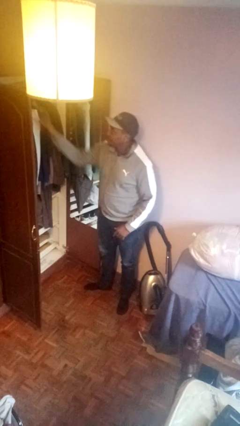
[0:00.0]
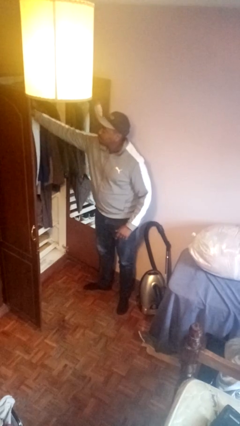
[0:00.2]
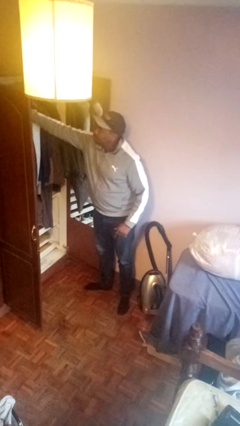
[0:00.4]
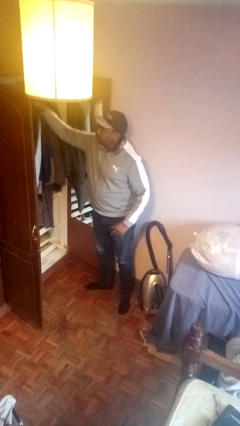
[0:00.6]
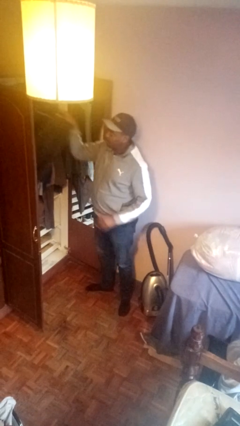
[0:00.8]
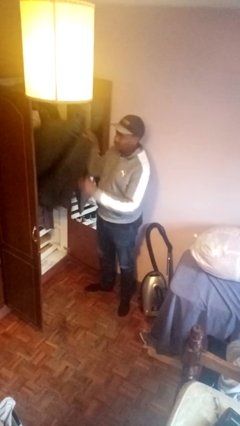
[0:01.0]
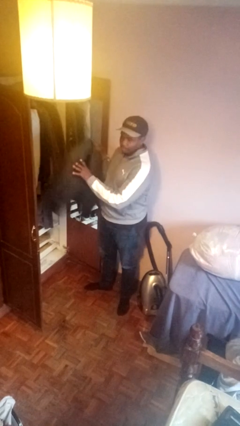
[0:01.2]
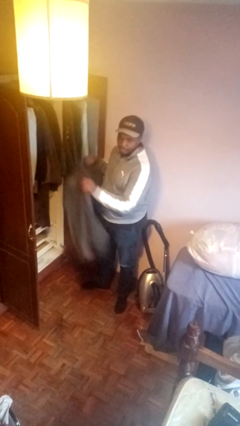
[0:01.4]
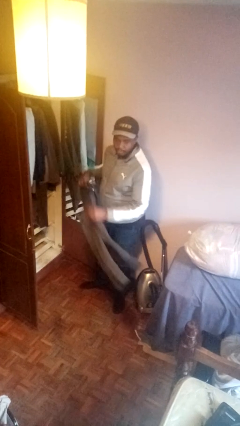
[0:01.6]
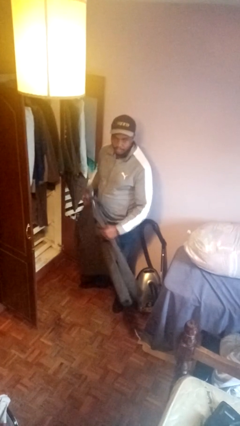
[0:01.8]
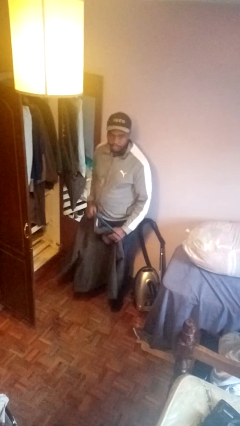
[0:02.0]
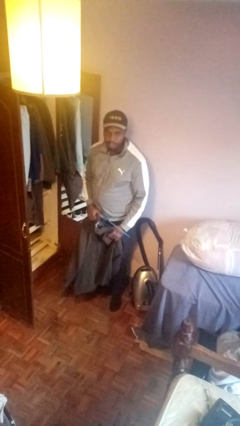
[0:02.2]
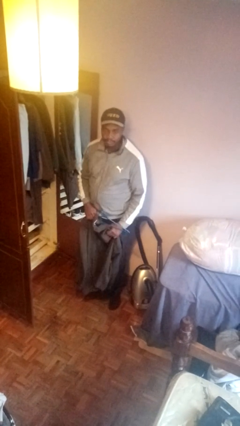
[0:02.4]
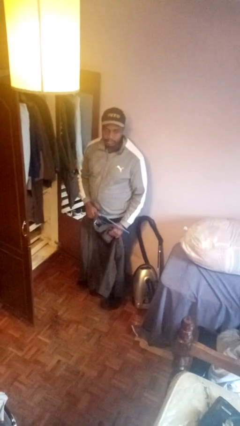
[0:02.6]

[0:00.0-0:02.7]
person takes clothes from closet

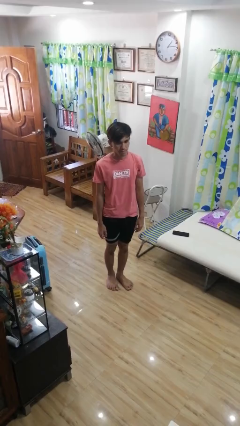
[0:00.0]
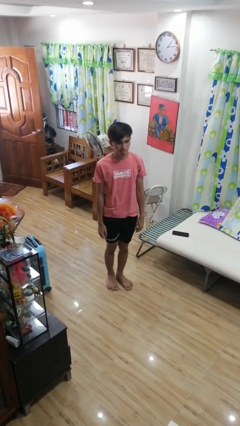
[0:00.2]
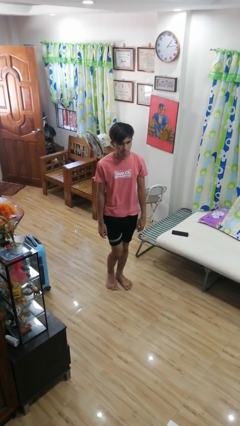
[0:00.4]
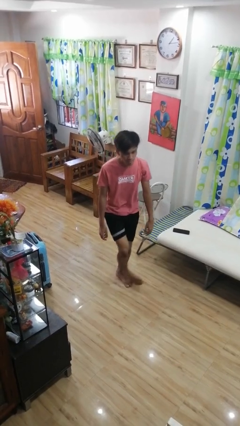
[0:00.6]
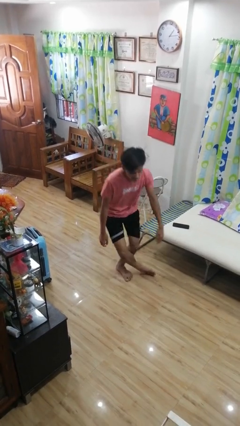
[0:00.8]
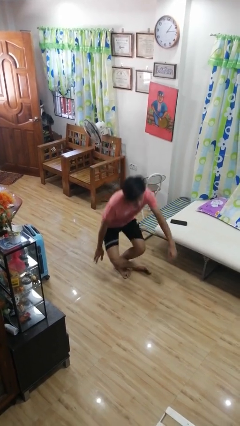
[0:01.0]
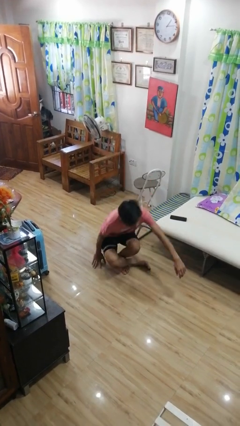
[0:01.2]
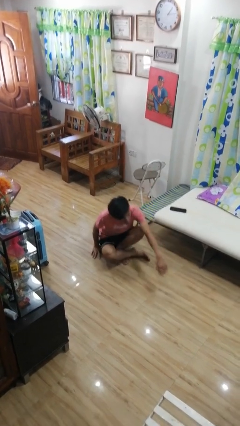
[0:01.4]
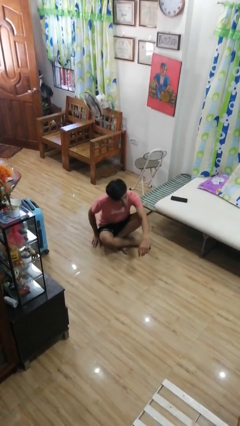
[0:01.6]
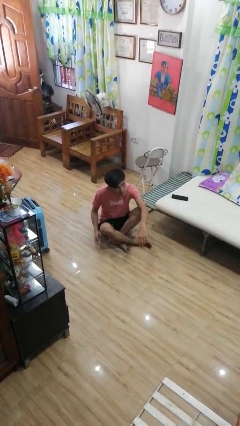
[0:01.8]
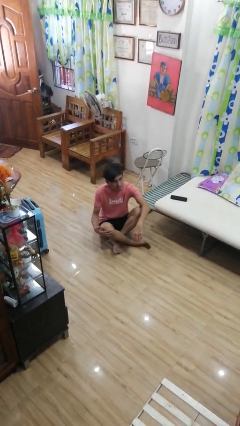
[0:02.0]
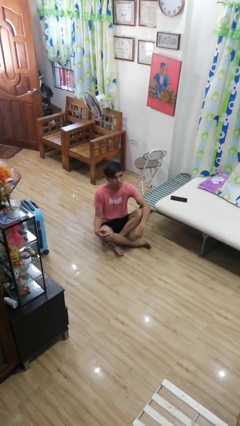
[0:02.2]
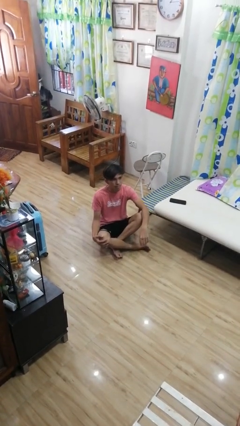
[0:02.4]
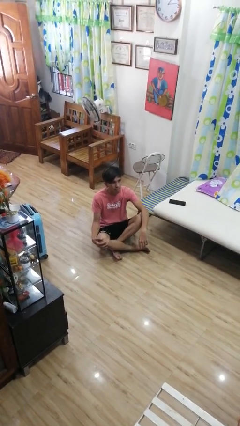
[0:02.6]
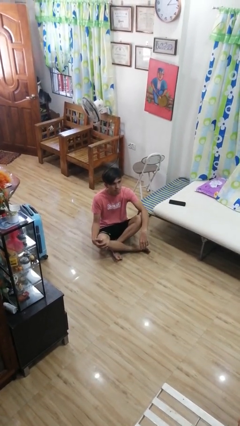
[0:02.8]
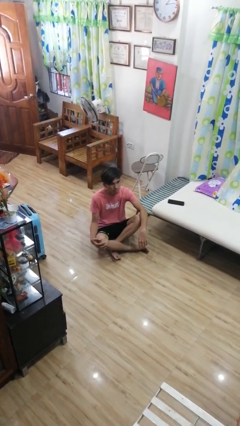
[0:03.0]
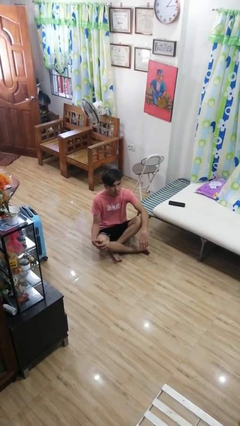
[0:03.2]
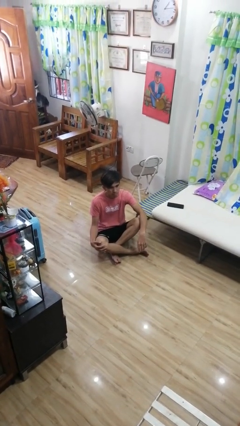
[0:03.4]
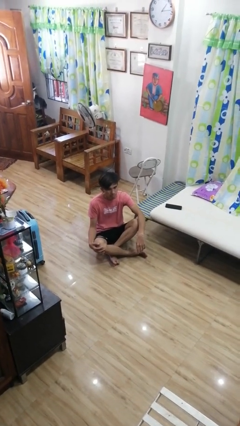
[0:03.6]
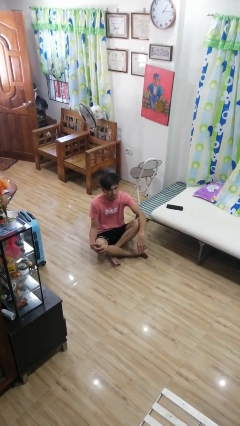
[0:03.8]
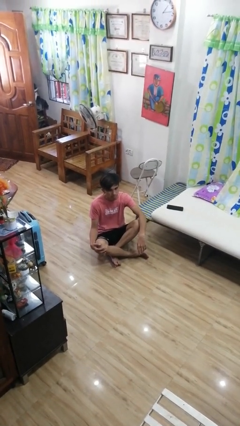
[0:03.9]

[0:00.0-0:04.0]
person sits crisscross

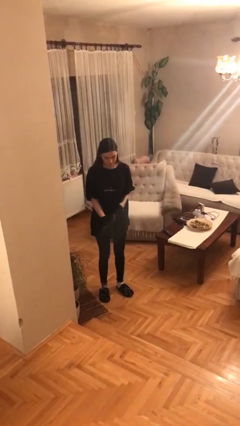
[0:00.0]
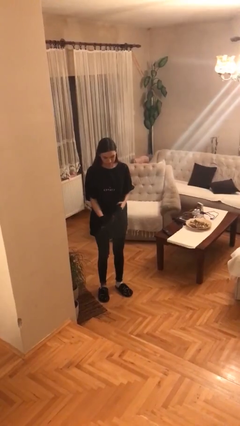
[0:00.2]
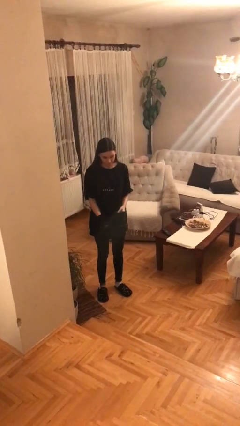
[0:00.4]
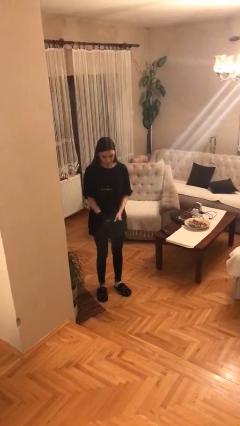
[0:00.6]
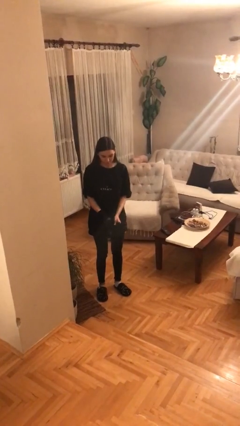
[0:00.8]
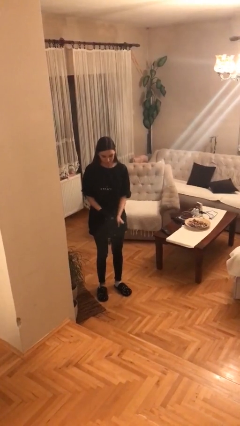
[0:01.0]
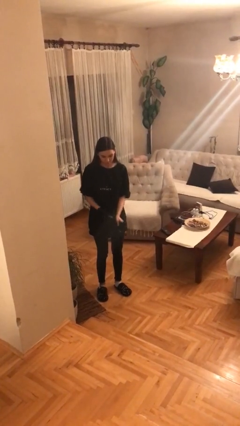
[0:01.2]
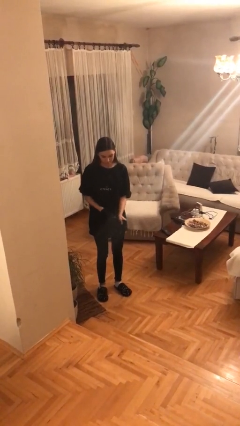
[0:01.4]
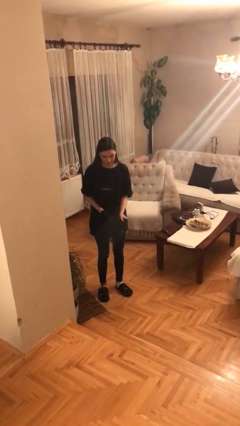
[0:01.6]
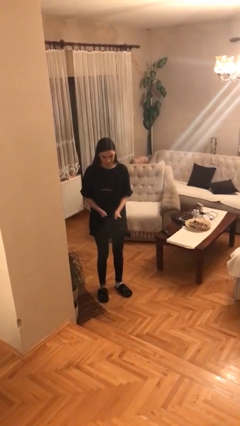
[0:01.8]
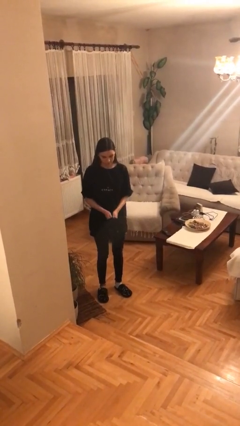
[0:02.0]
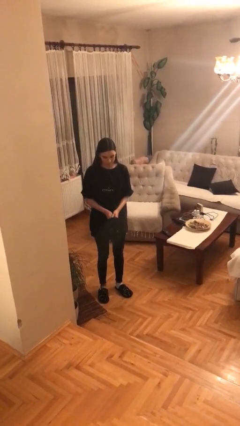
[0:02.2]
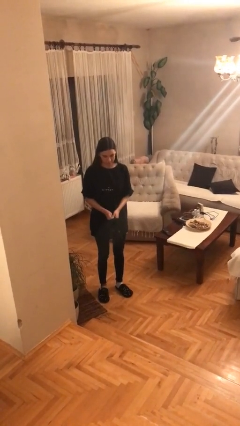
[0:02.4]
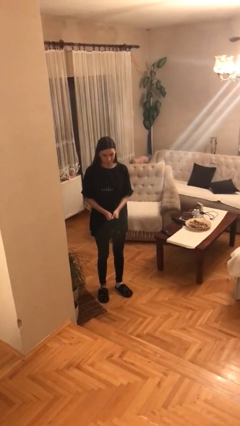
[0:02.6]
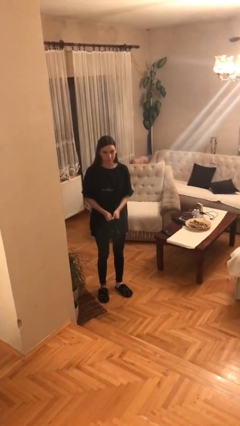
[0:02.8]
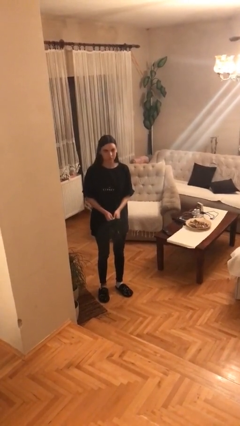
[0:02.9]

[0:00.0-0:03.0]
person takes off gloves

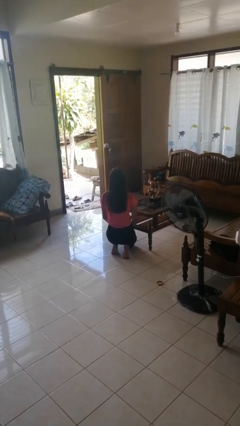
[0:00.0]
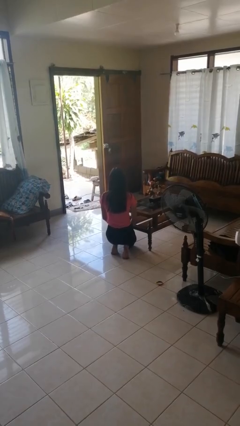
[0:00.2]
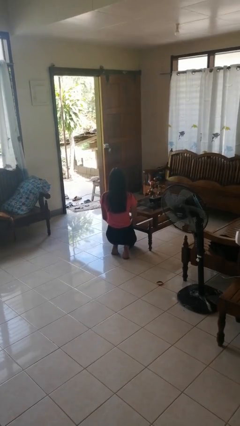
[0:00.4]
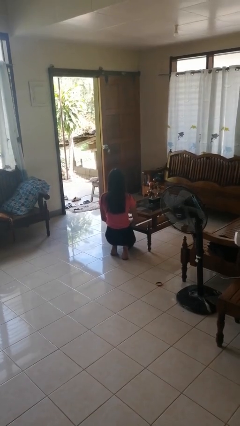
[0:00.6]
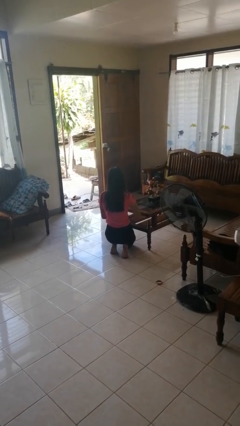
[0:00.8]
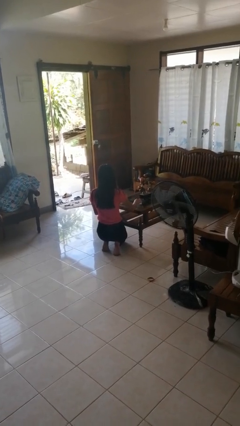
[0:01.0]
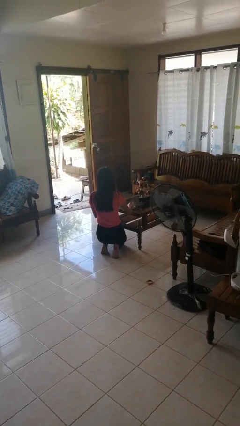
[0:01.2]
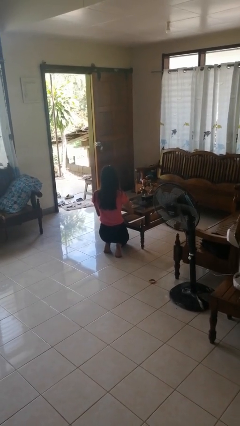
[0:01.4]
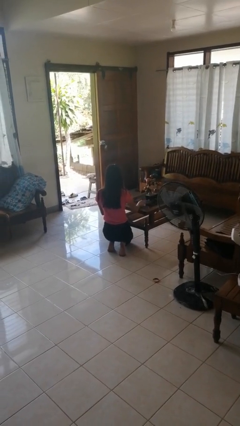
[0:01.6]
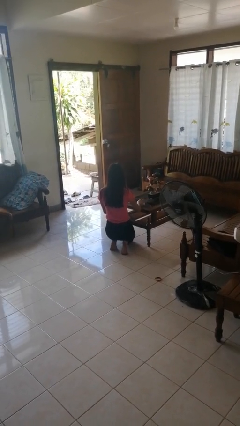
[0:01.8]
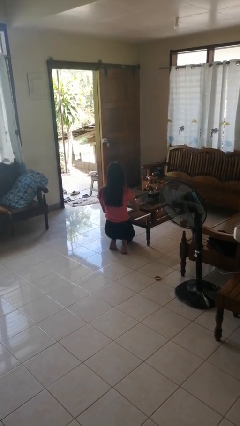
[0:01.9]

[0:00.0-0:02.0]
person cleans table with rag

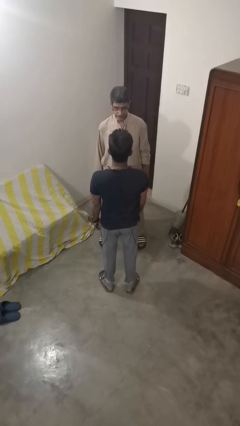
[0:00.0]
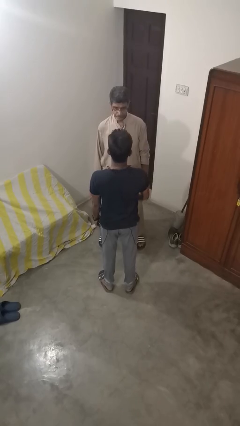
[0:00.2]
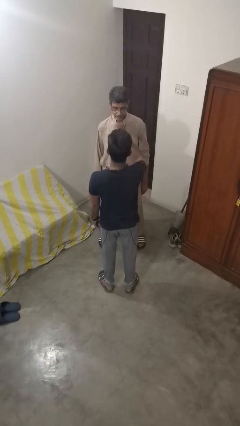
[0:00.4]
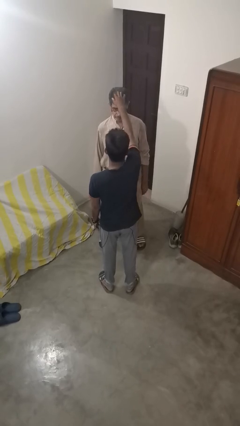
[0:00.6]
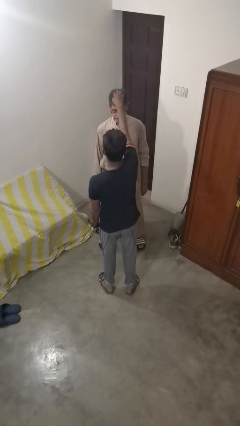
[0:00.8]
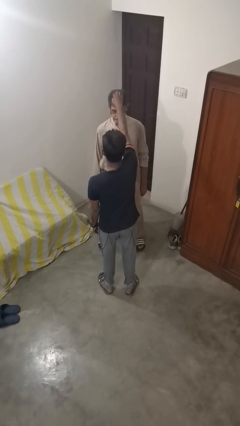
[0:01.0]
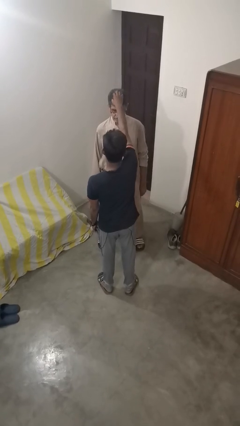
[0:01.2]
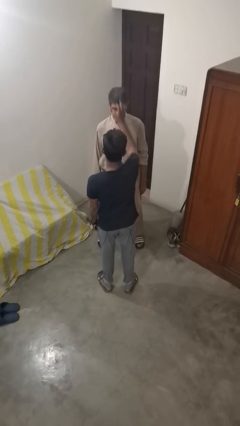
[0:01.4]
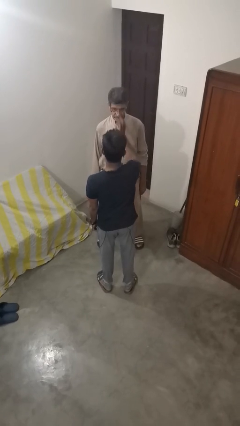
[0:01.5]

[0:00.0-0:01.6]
person grabs person by hair

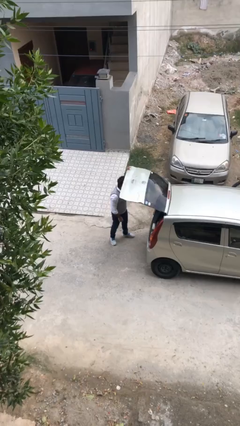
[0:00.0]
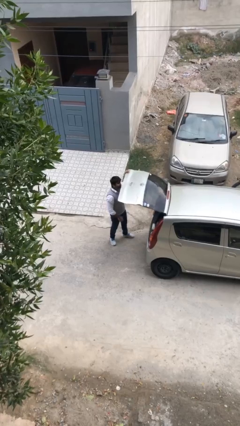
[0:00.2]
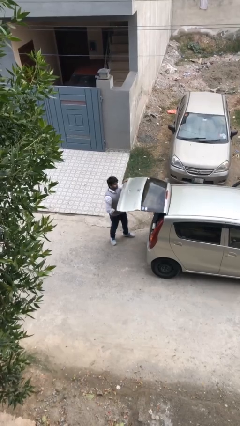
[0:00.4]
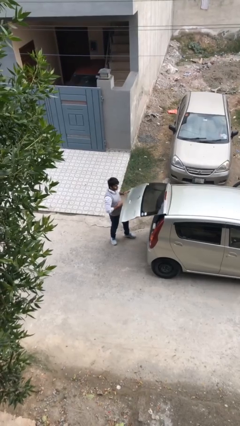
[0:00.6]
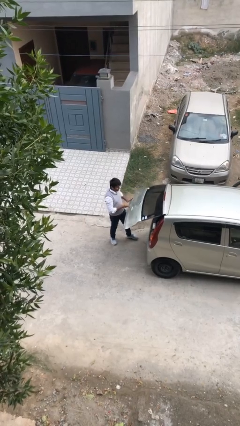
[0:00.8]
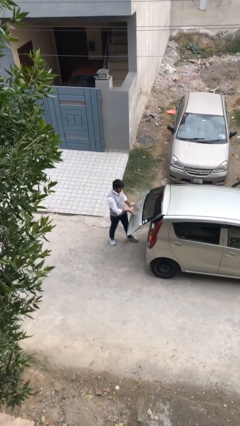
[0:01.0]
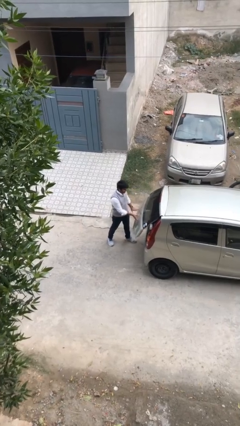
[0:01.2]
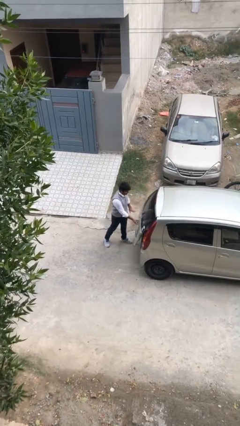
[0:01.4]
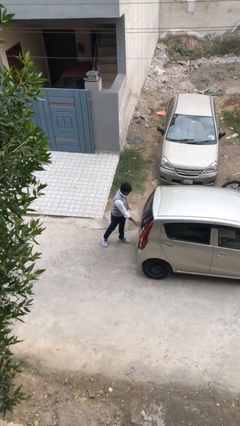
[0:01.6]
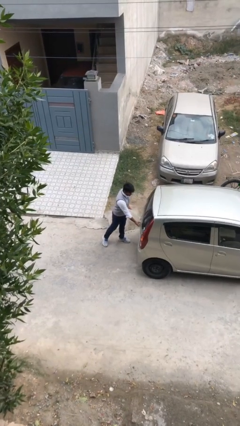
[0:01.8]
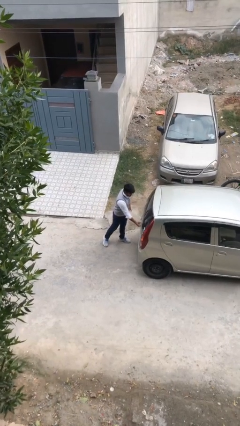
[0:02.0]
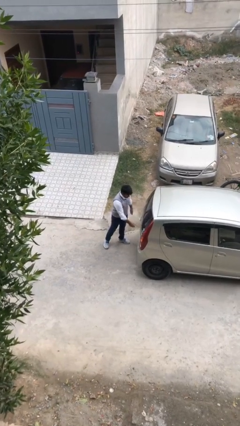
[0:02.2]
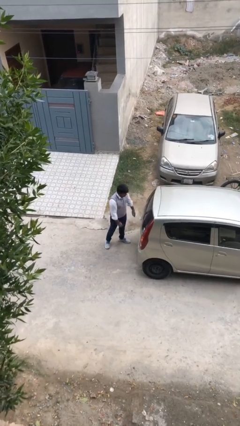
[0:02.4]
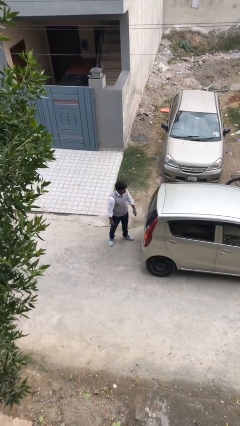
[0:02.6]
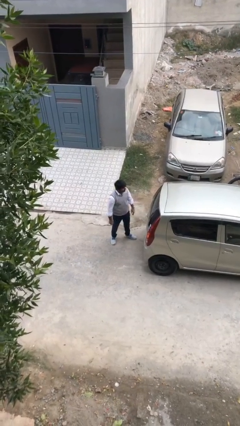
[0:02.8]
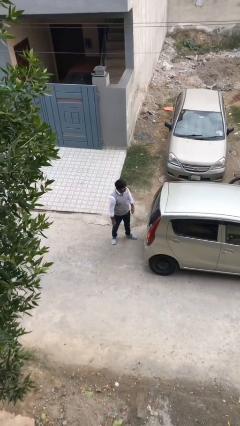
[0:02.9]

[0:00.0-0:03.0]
person closes car trunk

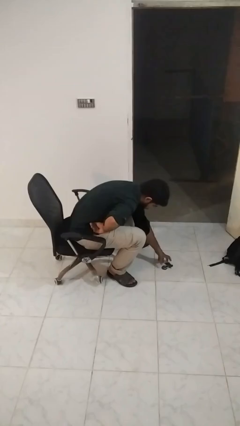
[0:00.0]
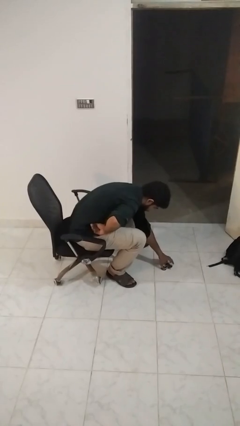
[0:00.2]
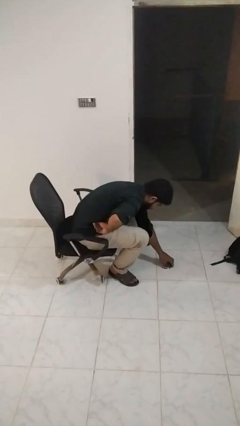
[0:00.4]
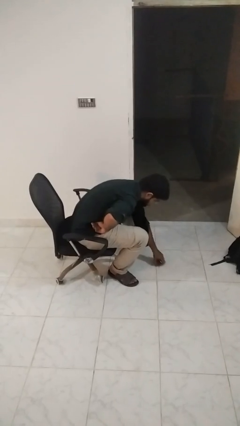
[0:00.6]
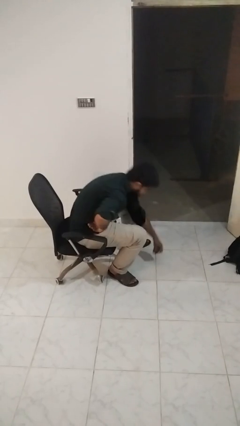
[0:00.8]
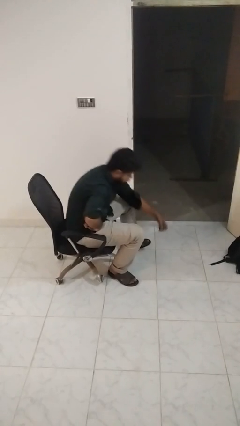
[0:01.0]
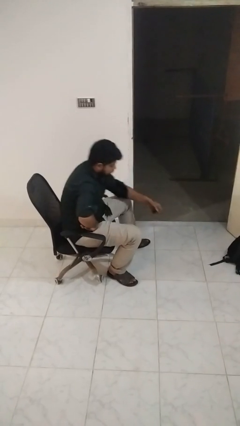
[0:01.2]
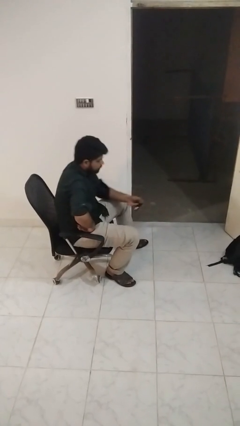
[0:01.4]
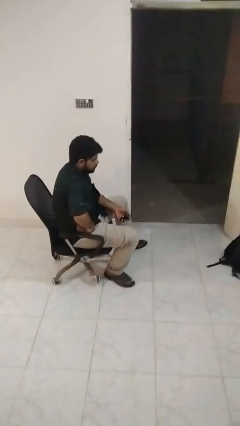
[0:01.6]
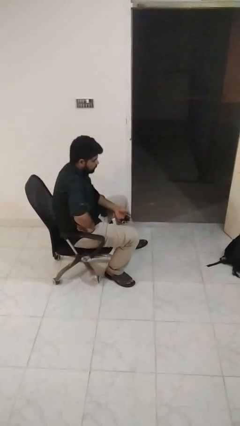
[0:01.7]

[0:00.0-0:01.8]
person picks up object from floor
